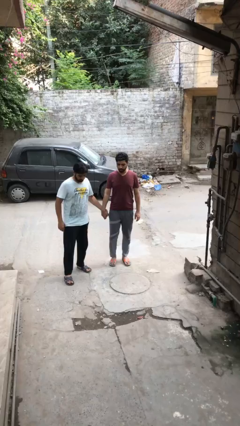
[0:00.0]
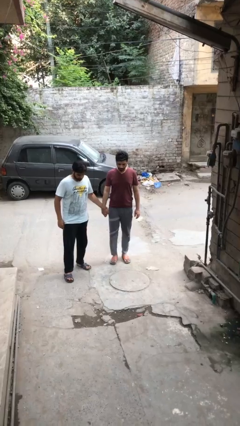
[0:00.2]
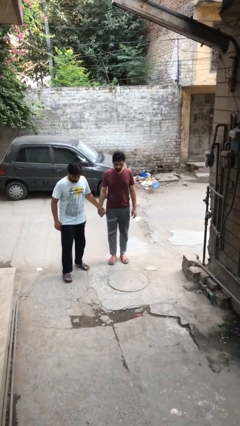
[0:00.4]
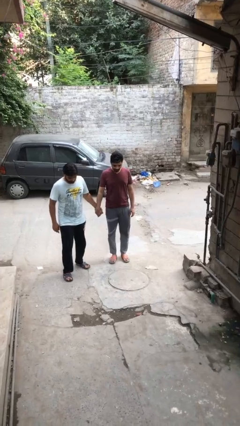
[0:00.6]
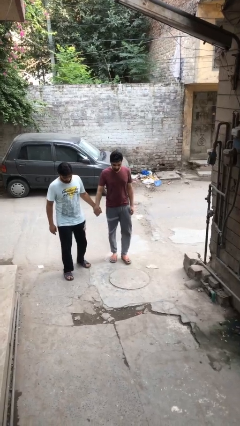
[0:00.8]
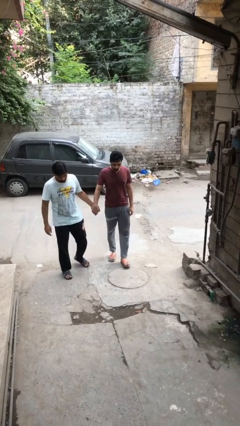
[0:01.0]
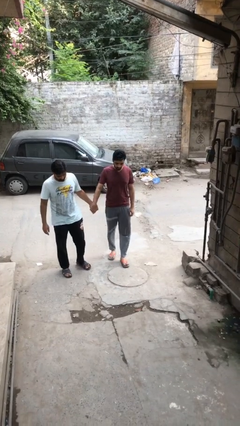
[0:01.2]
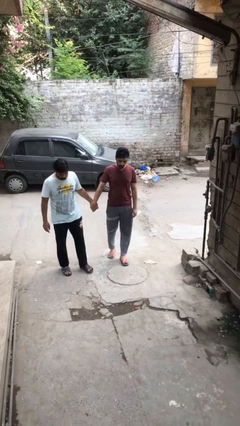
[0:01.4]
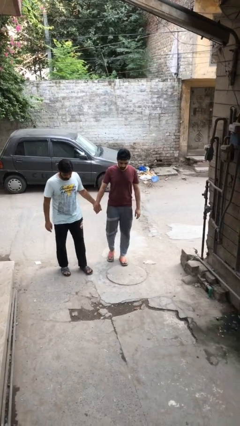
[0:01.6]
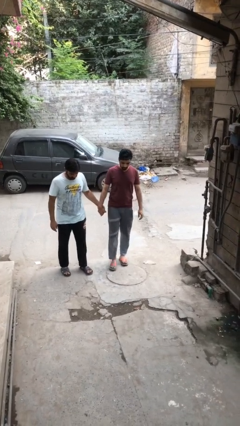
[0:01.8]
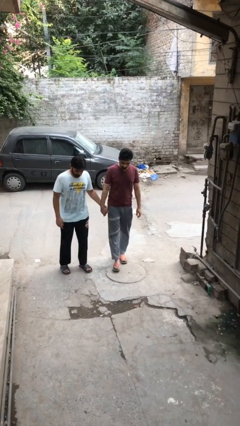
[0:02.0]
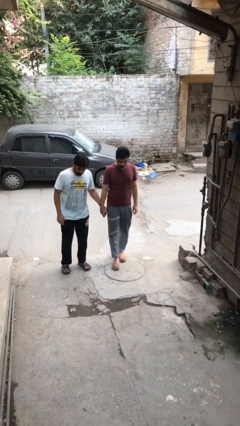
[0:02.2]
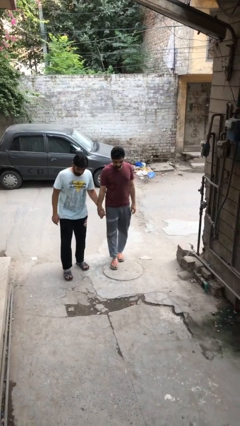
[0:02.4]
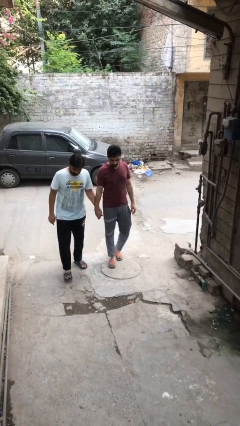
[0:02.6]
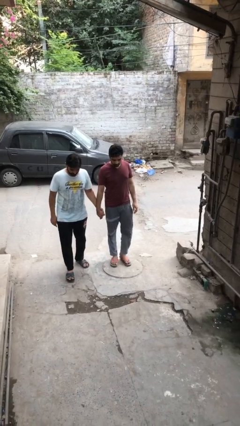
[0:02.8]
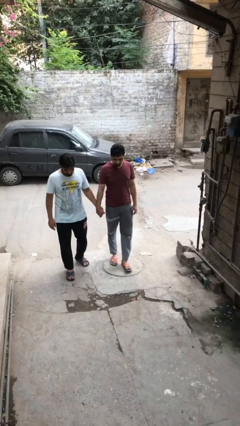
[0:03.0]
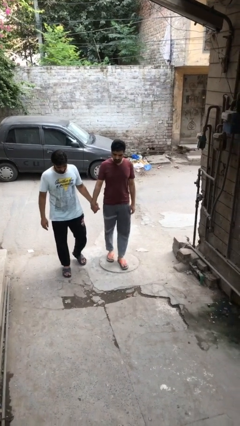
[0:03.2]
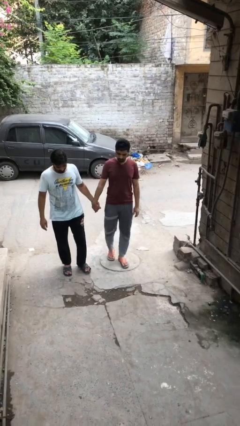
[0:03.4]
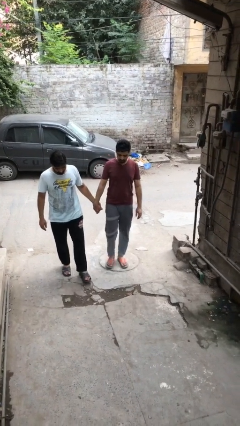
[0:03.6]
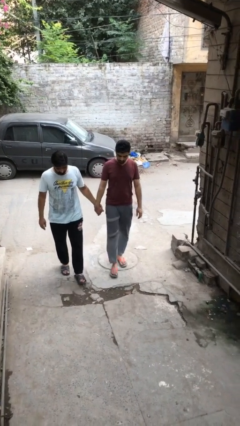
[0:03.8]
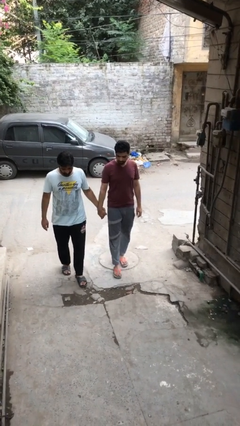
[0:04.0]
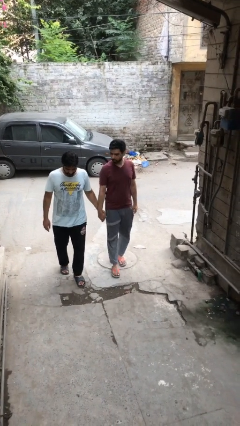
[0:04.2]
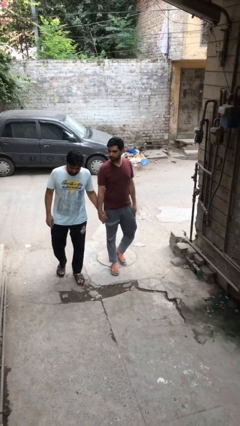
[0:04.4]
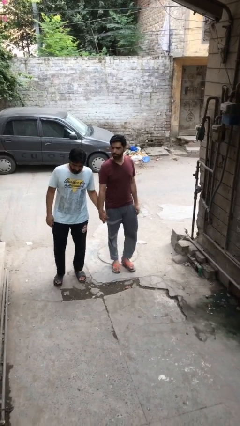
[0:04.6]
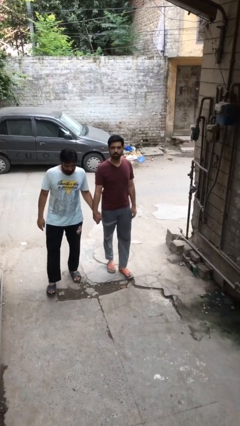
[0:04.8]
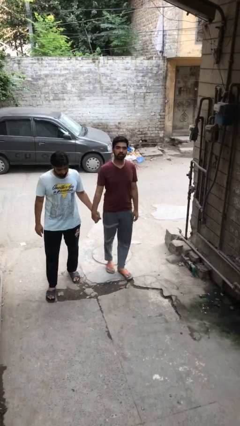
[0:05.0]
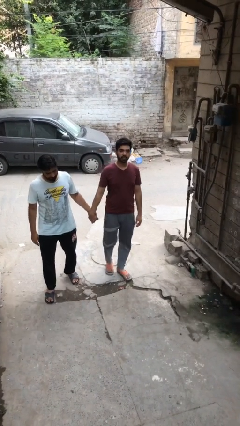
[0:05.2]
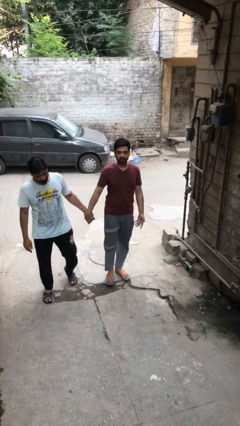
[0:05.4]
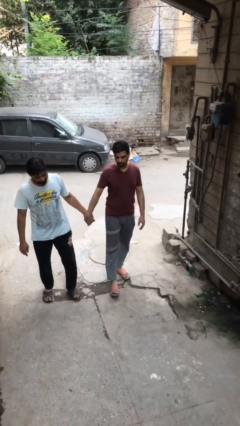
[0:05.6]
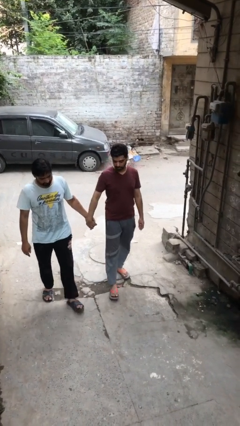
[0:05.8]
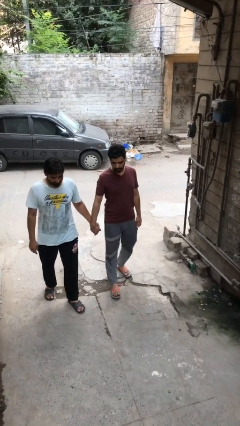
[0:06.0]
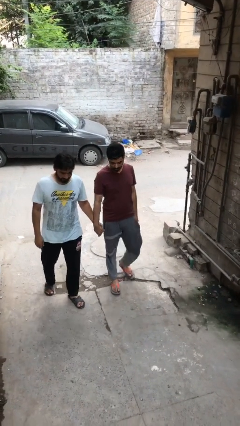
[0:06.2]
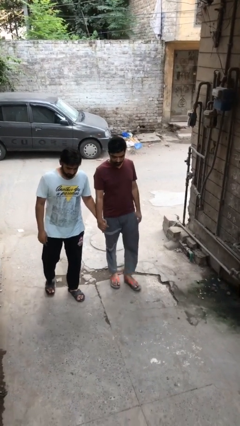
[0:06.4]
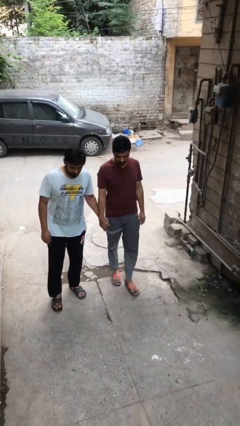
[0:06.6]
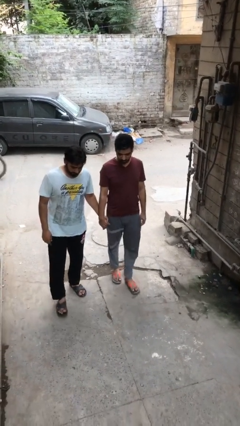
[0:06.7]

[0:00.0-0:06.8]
person holds hand

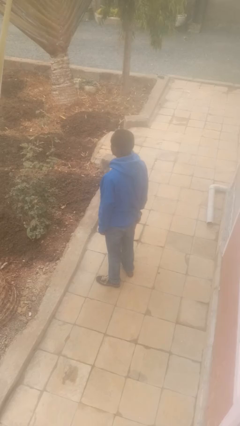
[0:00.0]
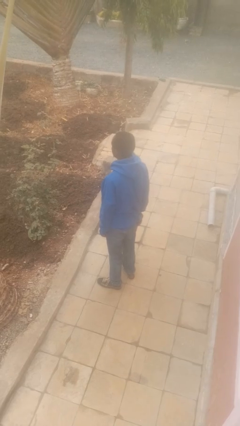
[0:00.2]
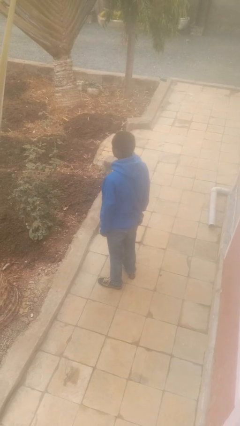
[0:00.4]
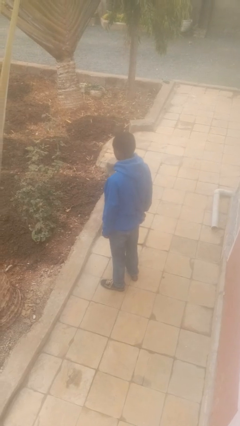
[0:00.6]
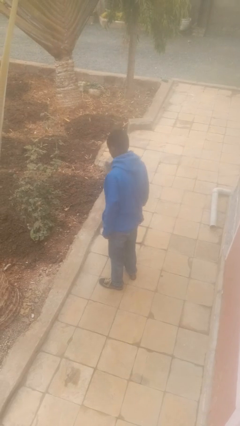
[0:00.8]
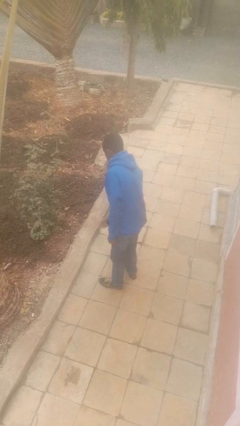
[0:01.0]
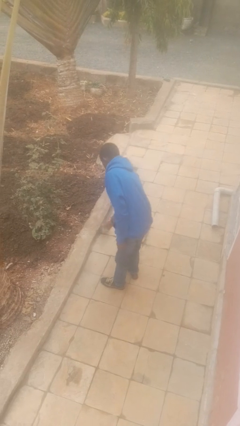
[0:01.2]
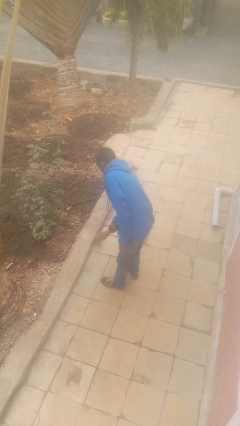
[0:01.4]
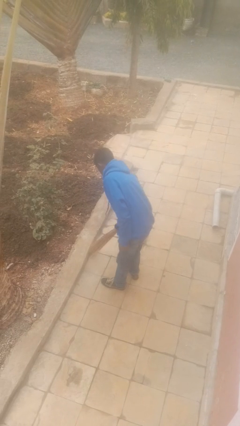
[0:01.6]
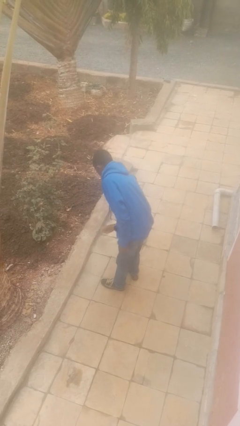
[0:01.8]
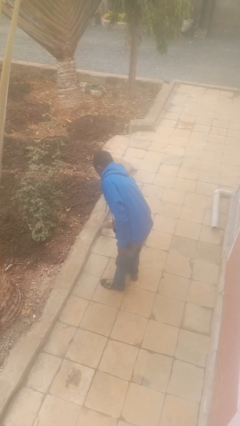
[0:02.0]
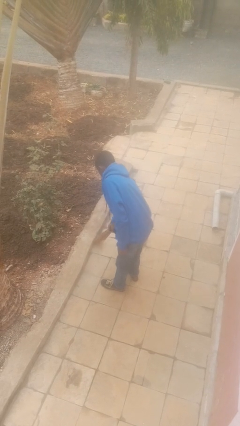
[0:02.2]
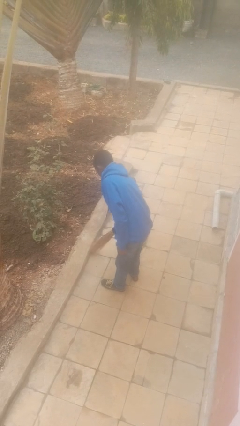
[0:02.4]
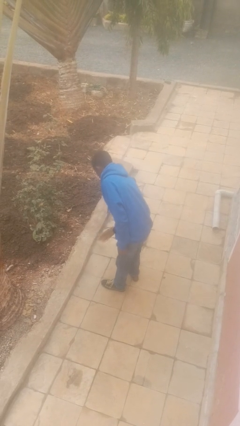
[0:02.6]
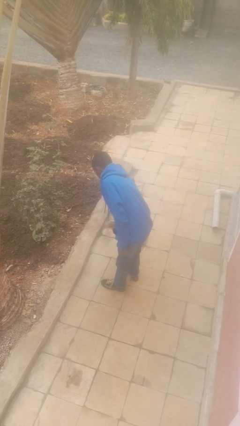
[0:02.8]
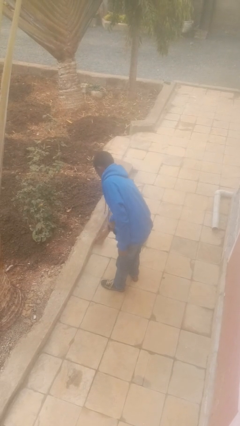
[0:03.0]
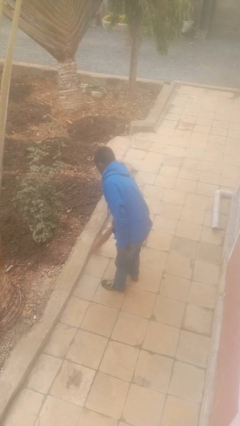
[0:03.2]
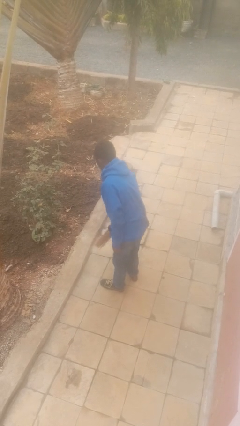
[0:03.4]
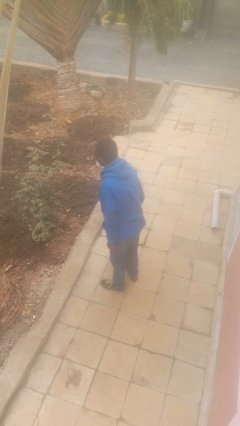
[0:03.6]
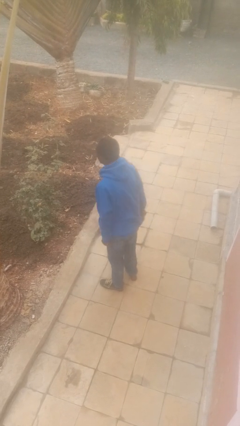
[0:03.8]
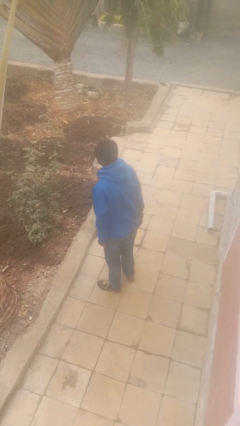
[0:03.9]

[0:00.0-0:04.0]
person sweeps floor

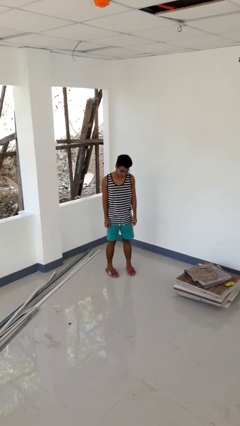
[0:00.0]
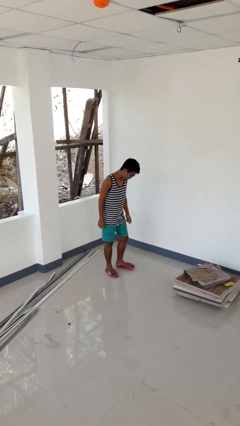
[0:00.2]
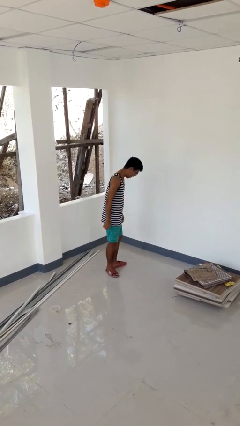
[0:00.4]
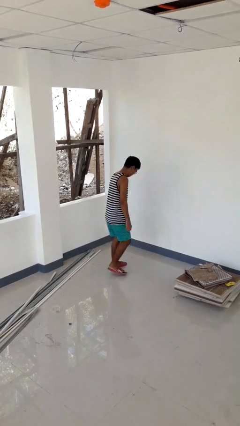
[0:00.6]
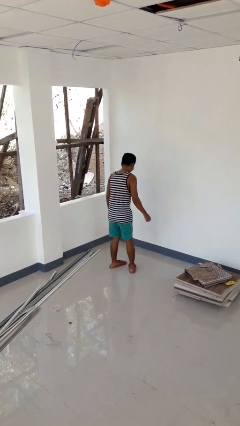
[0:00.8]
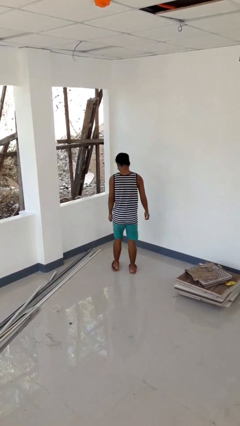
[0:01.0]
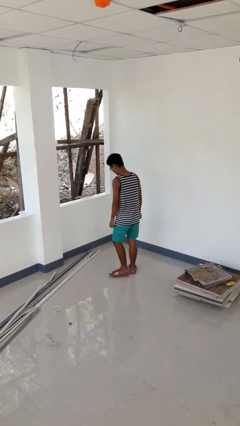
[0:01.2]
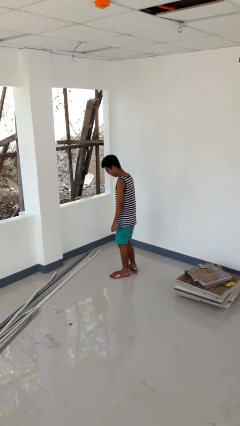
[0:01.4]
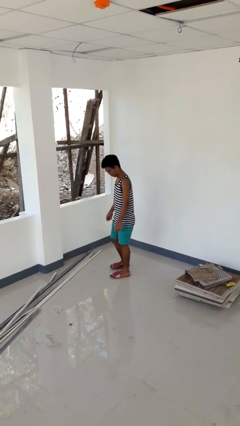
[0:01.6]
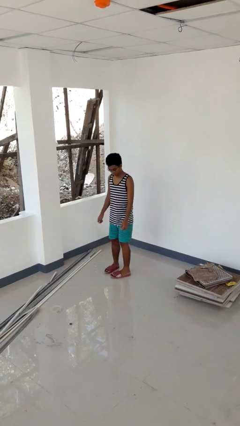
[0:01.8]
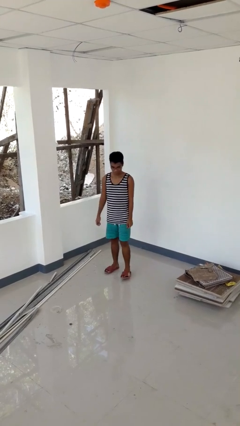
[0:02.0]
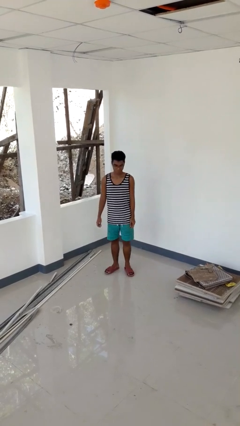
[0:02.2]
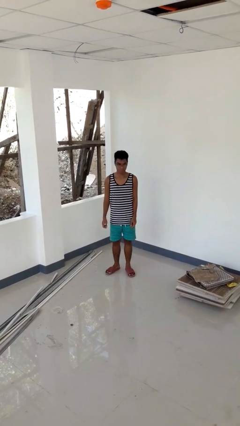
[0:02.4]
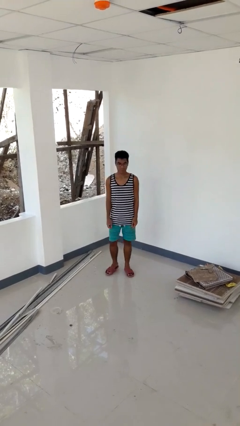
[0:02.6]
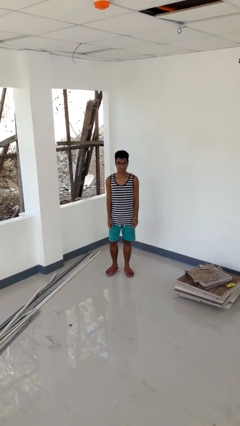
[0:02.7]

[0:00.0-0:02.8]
person twirls

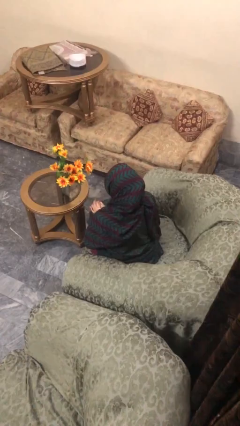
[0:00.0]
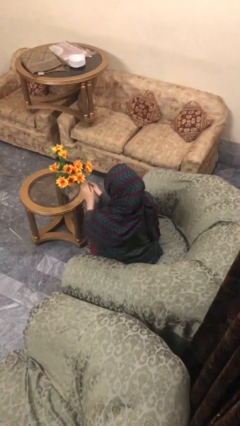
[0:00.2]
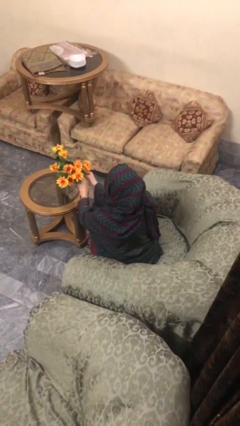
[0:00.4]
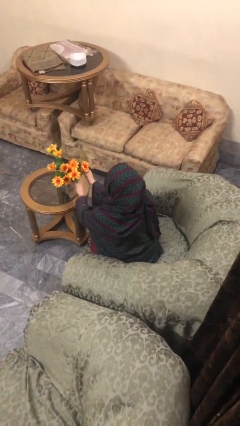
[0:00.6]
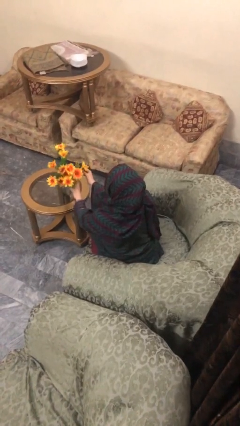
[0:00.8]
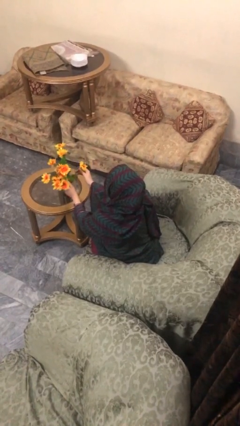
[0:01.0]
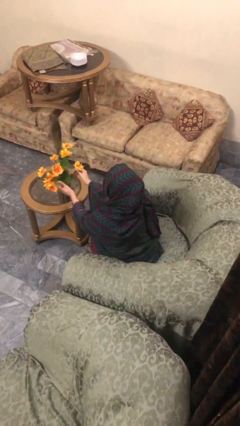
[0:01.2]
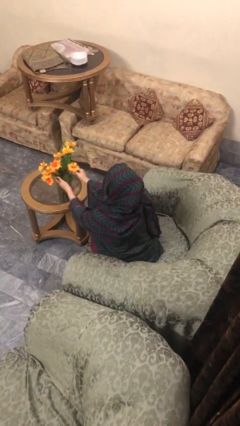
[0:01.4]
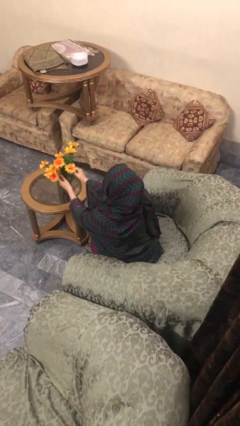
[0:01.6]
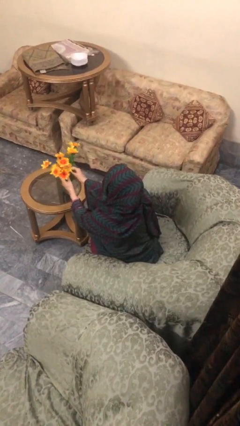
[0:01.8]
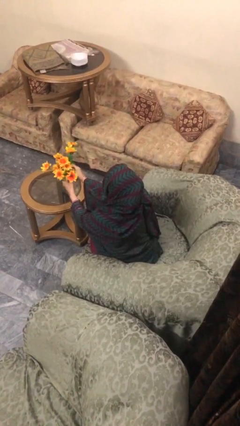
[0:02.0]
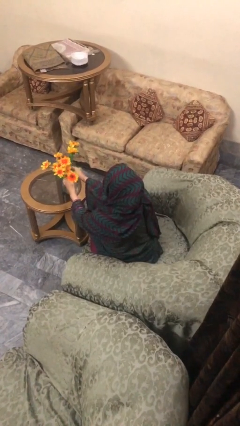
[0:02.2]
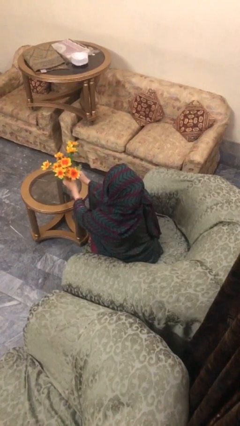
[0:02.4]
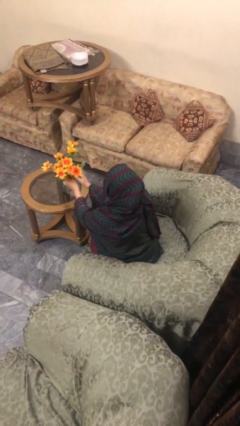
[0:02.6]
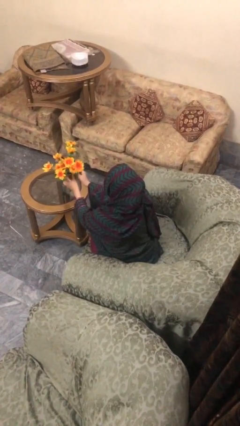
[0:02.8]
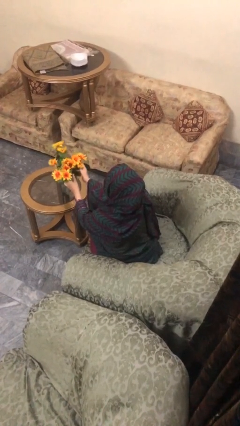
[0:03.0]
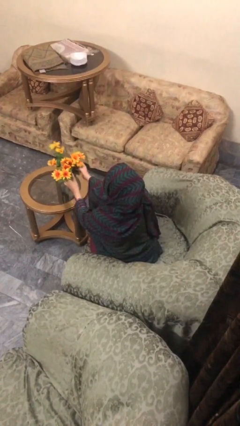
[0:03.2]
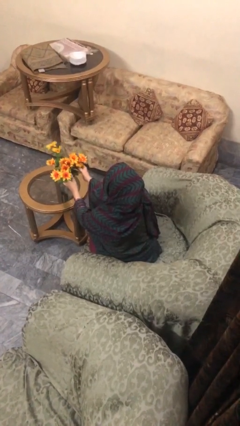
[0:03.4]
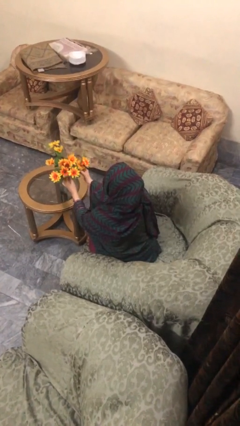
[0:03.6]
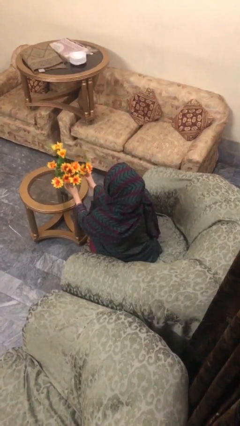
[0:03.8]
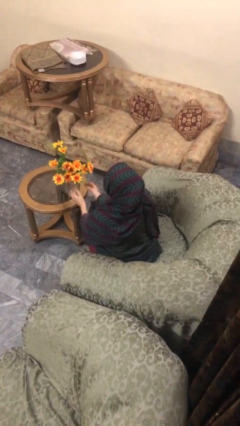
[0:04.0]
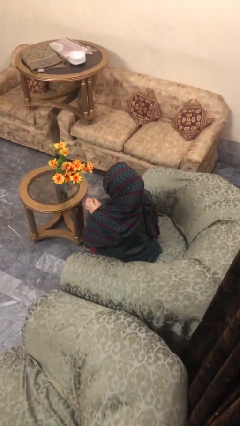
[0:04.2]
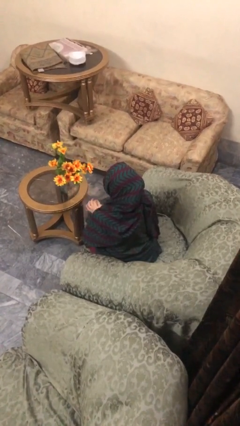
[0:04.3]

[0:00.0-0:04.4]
person arranges flowers in vase
